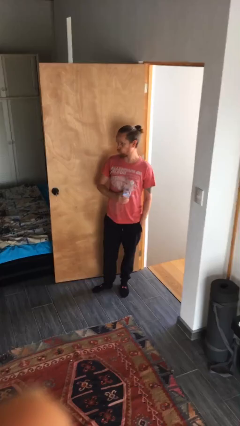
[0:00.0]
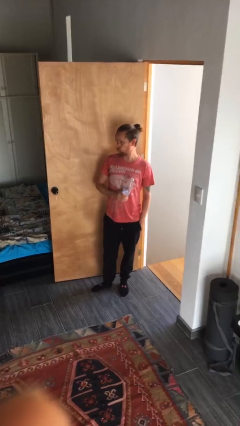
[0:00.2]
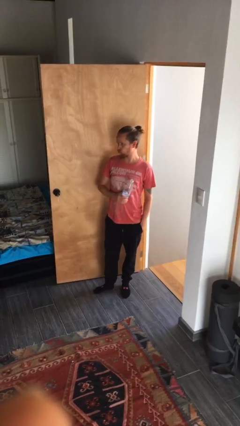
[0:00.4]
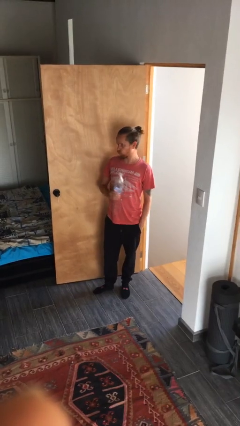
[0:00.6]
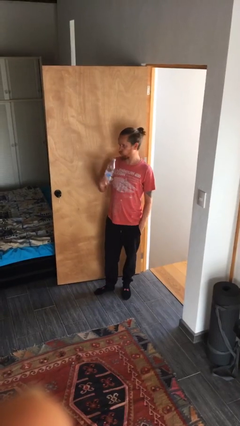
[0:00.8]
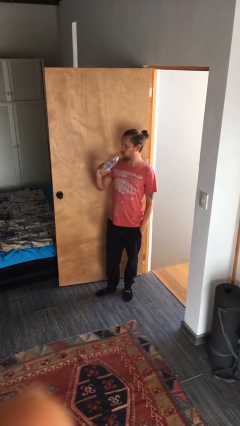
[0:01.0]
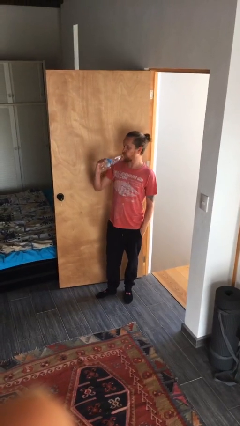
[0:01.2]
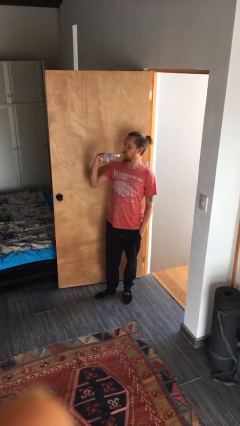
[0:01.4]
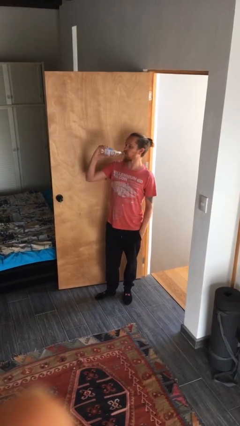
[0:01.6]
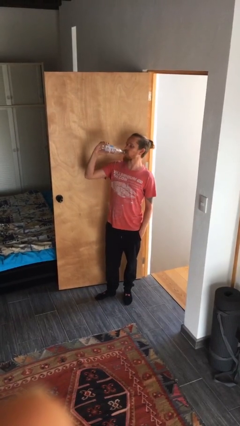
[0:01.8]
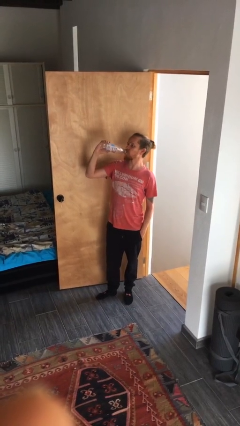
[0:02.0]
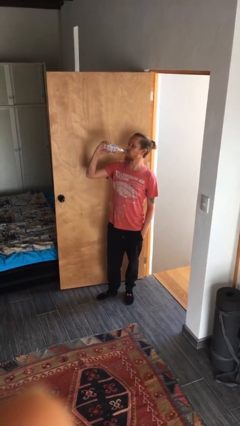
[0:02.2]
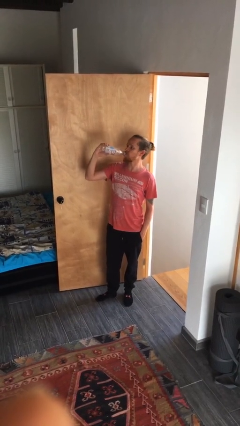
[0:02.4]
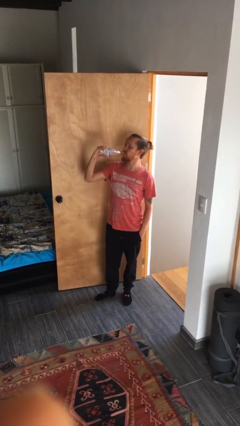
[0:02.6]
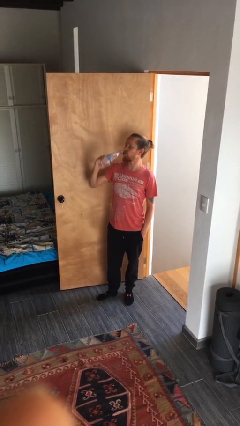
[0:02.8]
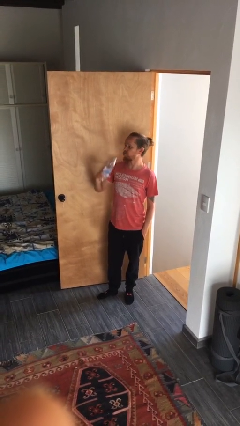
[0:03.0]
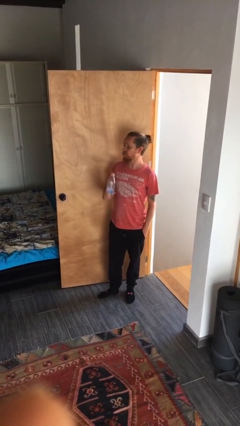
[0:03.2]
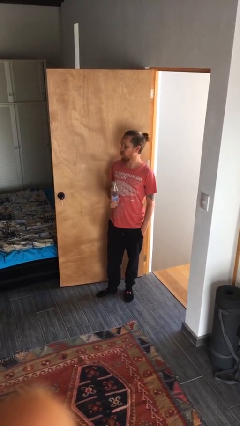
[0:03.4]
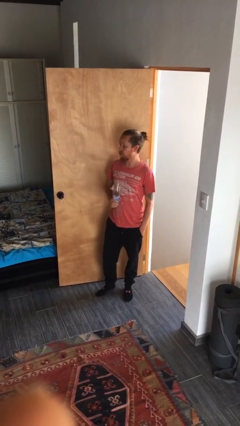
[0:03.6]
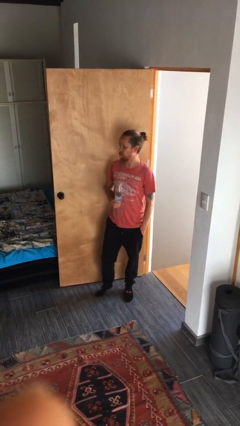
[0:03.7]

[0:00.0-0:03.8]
person drinks from bottle

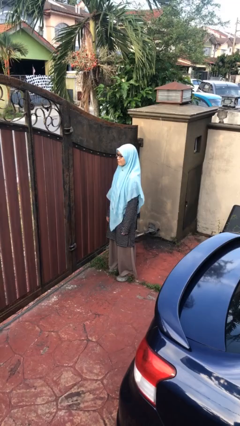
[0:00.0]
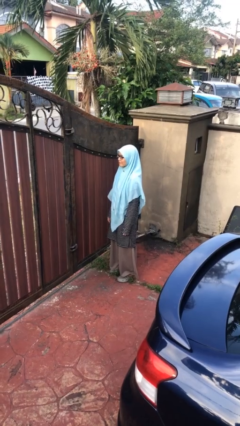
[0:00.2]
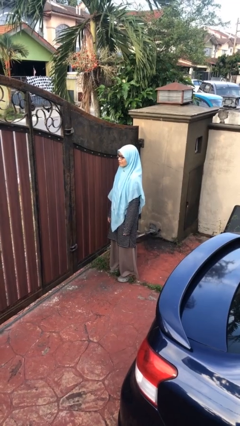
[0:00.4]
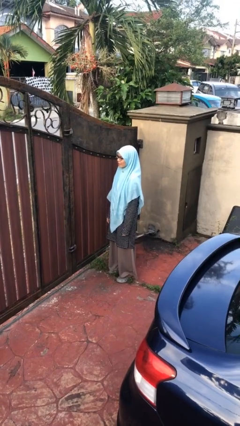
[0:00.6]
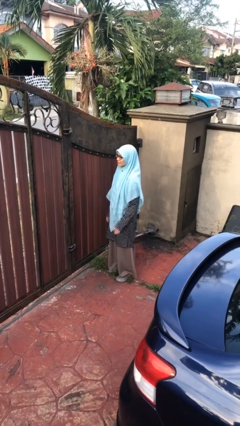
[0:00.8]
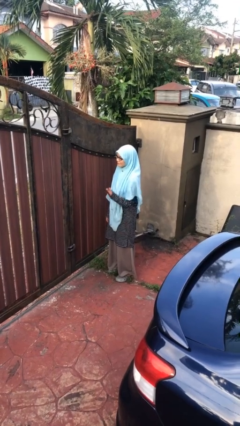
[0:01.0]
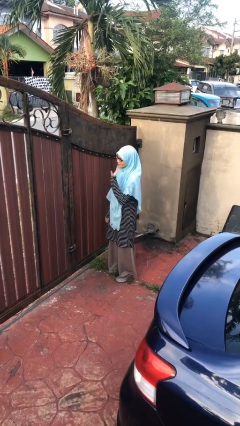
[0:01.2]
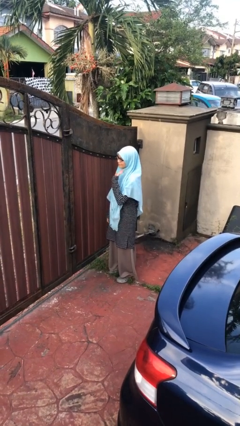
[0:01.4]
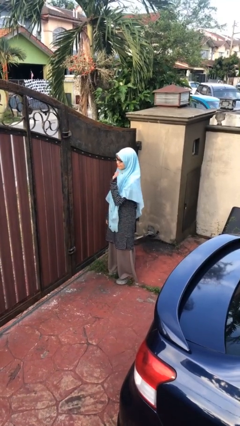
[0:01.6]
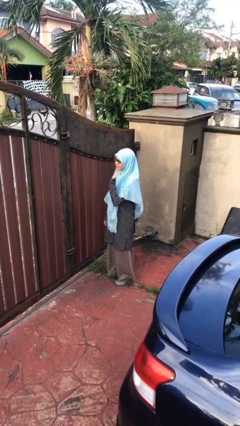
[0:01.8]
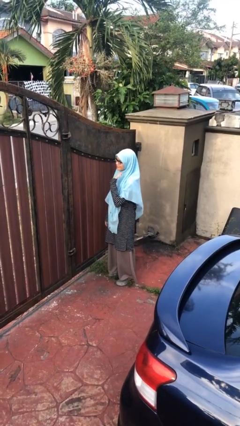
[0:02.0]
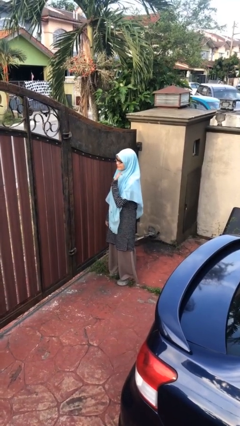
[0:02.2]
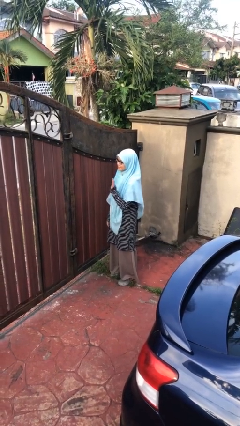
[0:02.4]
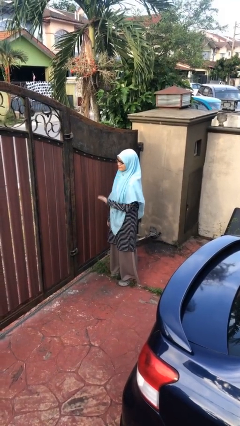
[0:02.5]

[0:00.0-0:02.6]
person waves at person

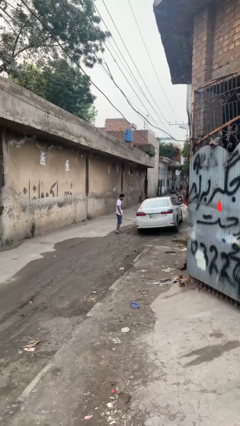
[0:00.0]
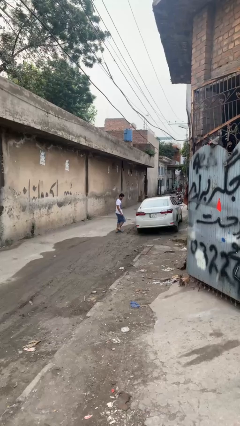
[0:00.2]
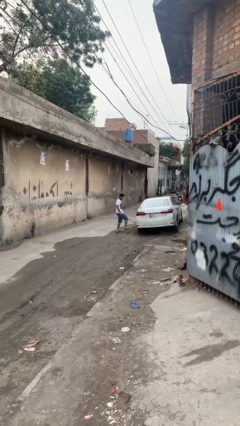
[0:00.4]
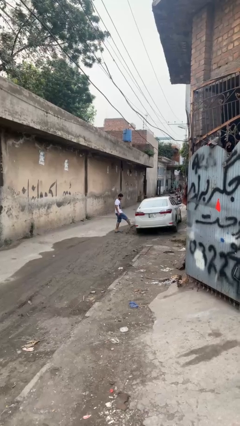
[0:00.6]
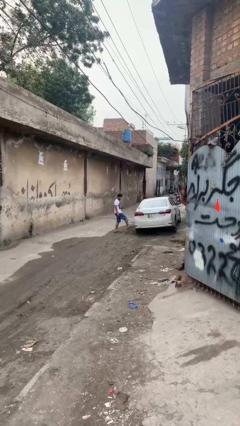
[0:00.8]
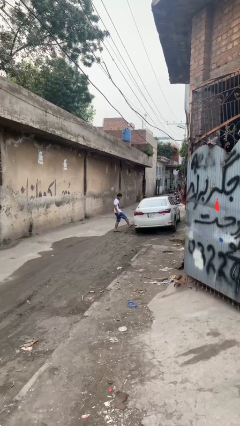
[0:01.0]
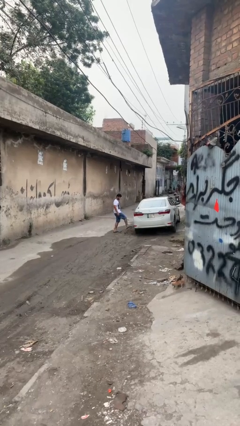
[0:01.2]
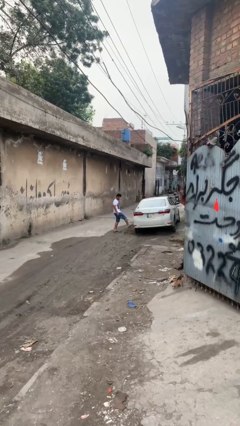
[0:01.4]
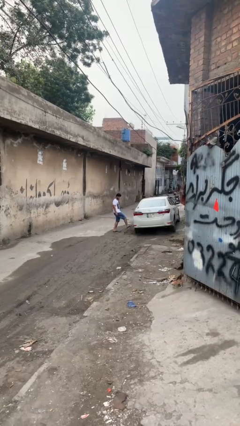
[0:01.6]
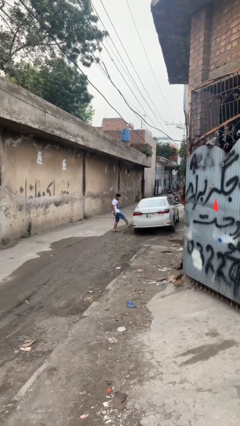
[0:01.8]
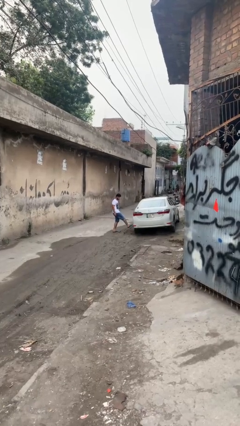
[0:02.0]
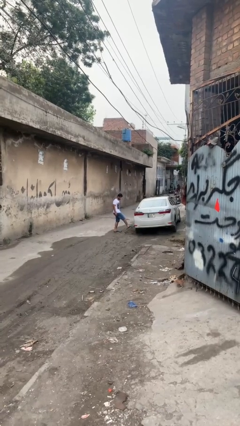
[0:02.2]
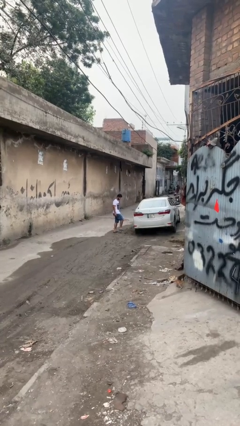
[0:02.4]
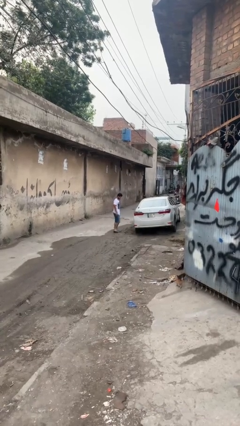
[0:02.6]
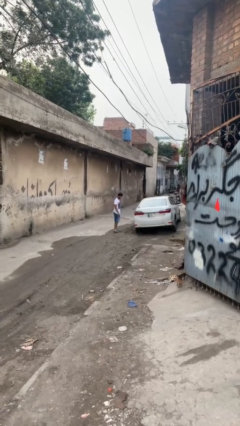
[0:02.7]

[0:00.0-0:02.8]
person kicks car tires

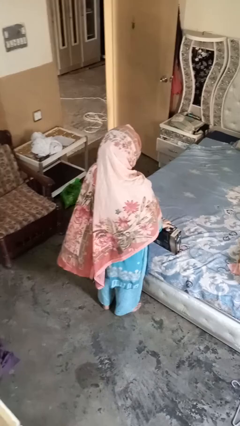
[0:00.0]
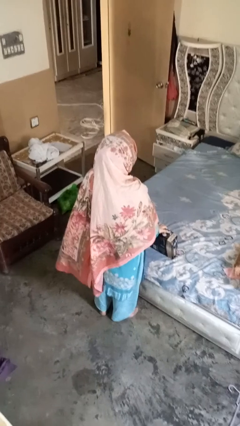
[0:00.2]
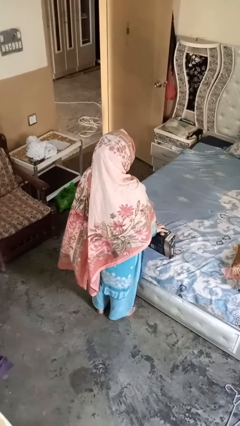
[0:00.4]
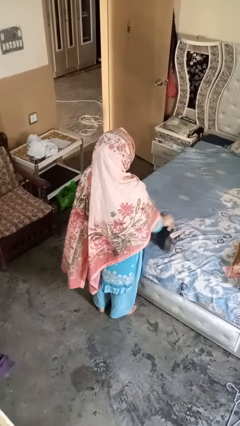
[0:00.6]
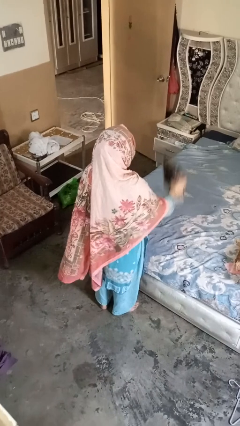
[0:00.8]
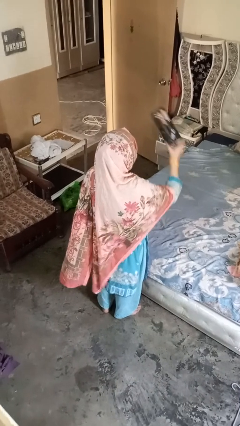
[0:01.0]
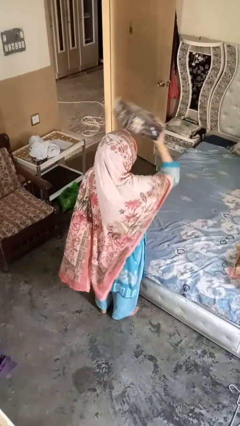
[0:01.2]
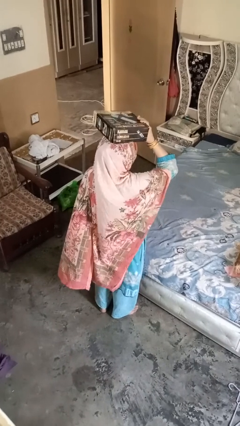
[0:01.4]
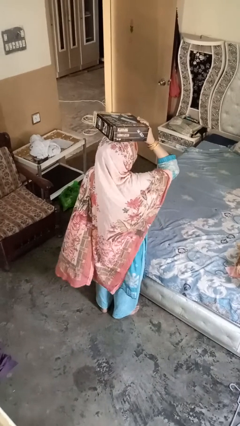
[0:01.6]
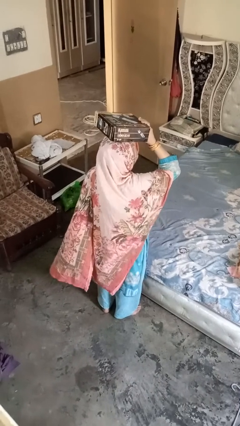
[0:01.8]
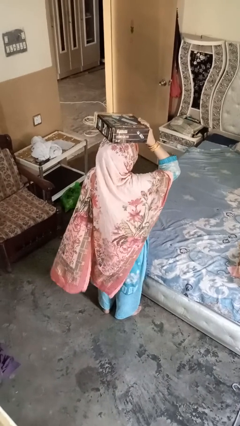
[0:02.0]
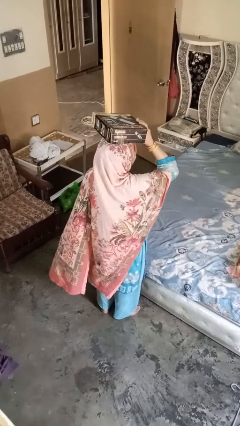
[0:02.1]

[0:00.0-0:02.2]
person holds object above head

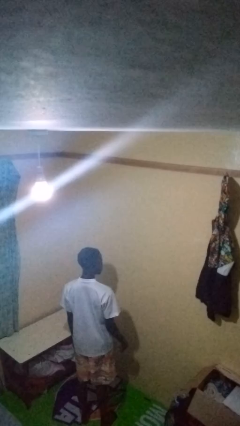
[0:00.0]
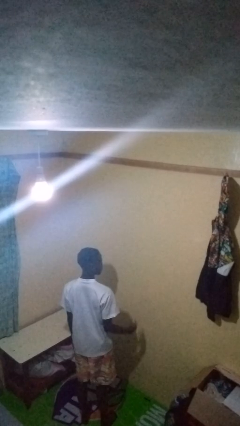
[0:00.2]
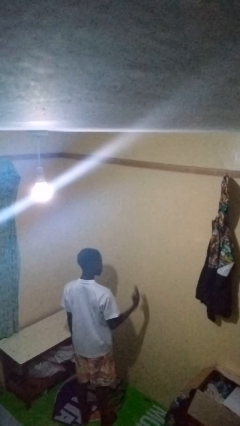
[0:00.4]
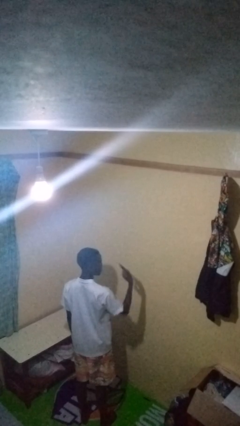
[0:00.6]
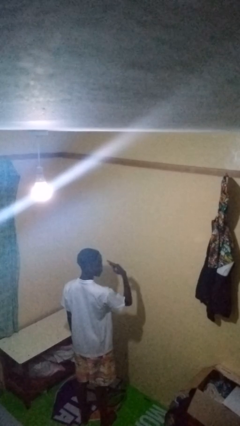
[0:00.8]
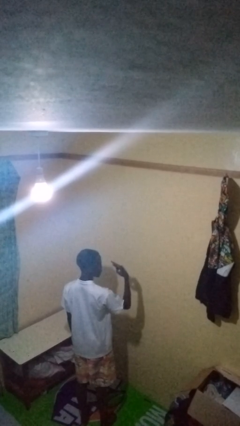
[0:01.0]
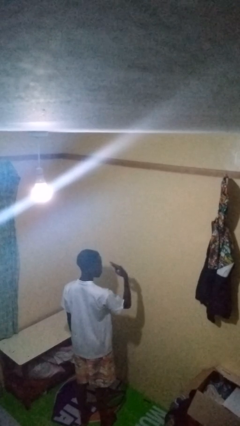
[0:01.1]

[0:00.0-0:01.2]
person gestures watch closely

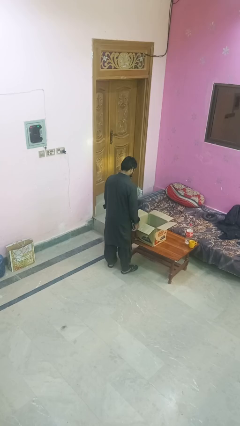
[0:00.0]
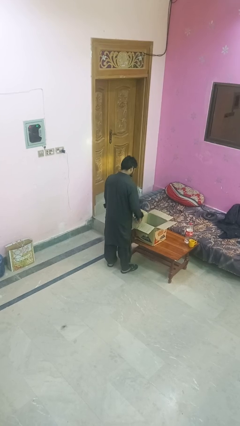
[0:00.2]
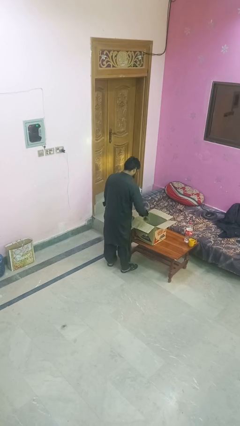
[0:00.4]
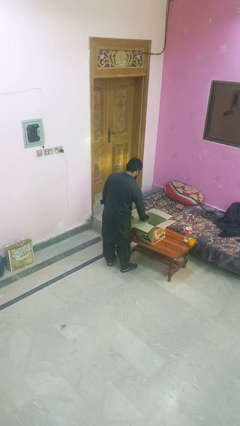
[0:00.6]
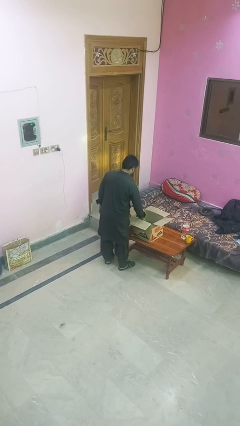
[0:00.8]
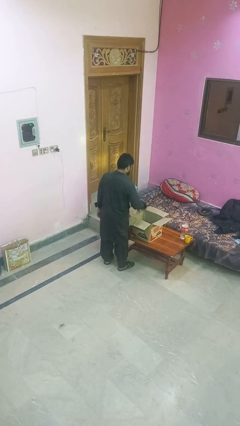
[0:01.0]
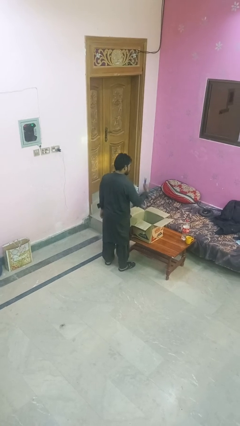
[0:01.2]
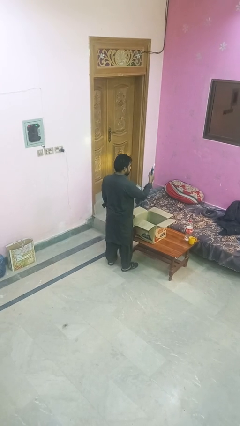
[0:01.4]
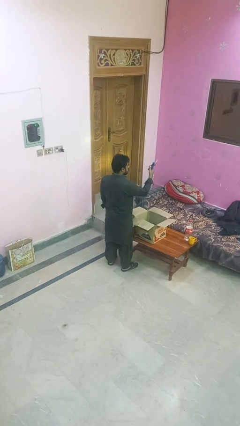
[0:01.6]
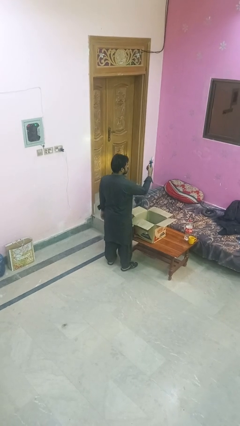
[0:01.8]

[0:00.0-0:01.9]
person takes object from box

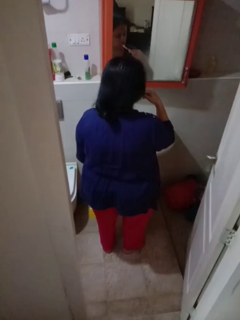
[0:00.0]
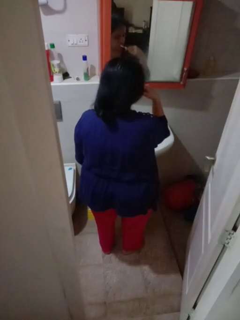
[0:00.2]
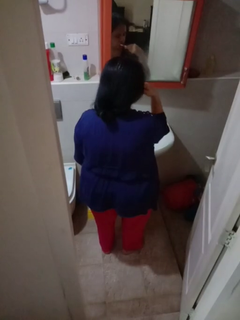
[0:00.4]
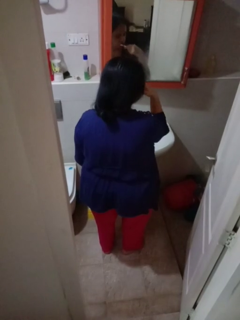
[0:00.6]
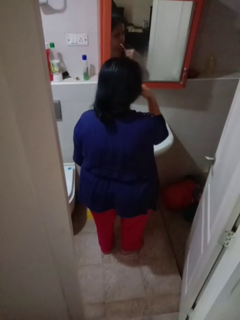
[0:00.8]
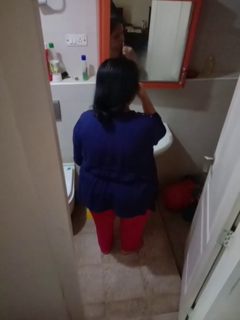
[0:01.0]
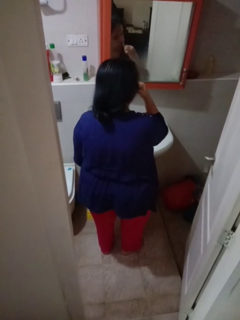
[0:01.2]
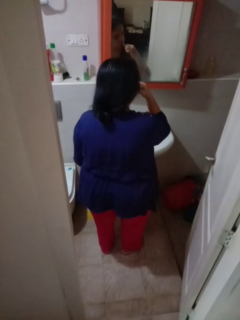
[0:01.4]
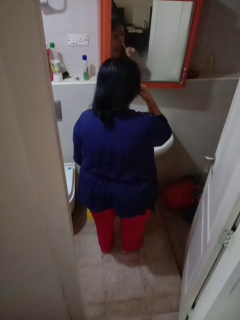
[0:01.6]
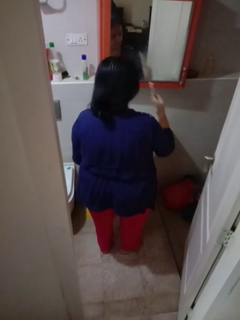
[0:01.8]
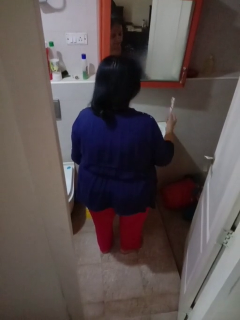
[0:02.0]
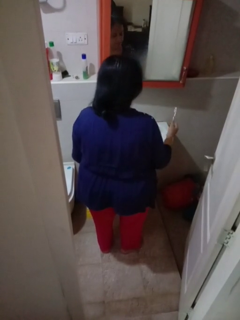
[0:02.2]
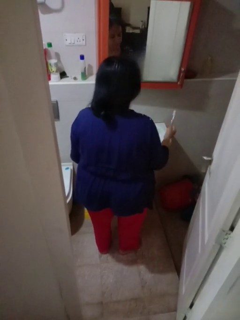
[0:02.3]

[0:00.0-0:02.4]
person brushes teeth

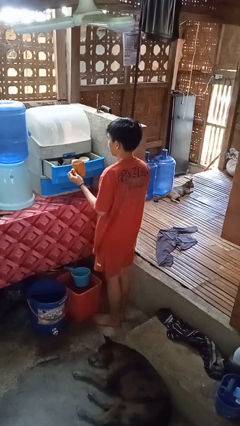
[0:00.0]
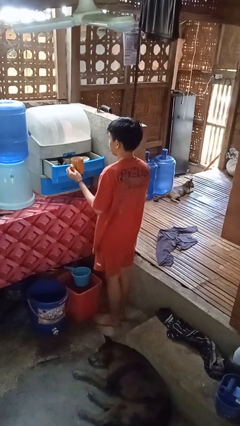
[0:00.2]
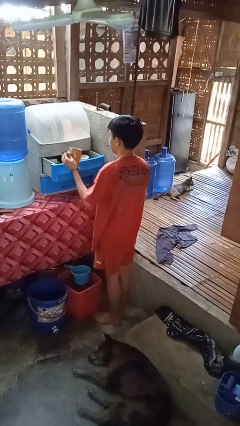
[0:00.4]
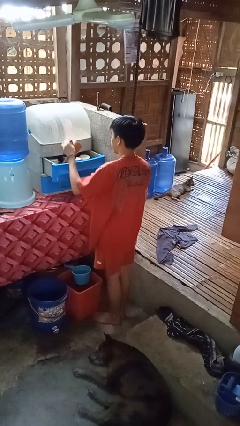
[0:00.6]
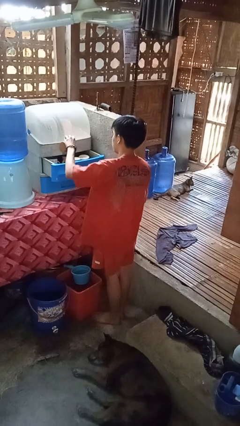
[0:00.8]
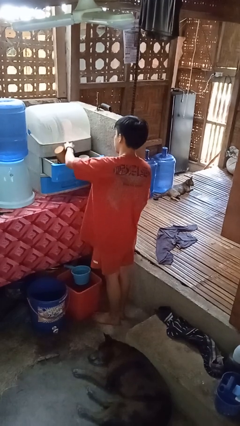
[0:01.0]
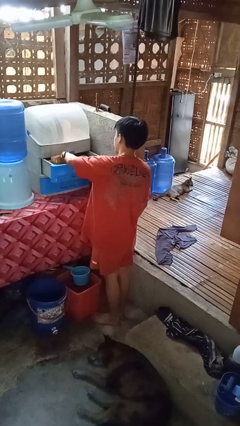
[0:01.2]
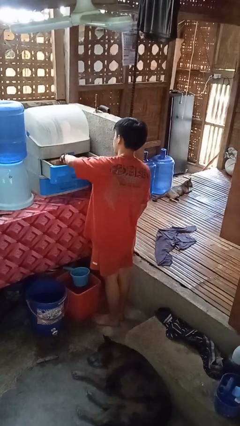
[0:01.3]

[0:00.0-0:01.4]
person puts down object into cabinet
